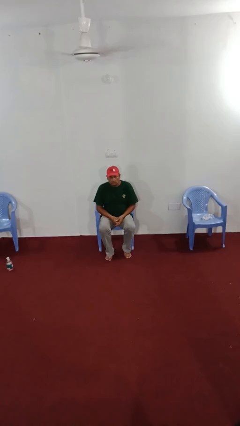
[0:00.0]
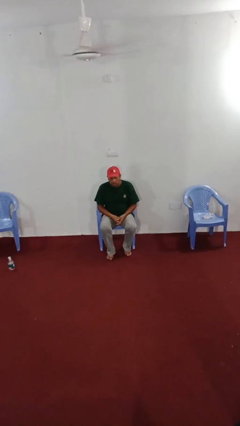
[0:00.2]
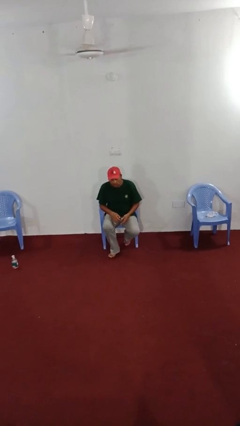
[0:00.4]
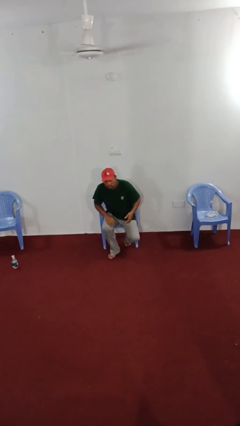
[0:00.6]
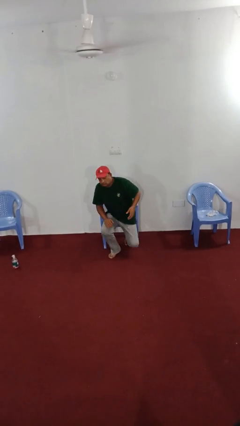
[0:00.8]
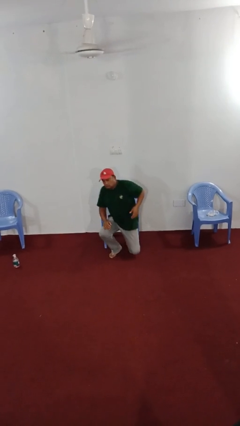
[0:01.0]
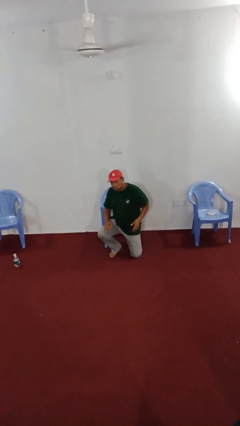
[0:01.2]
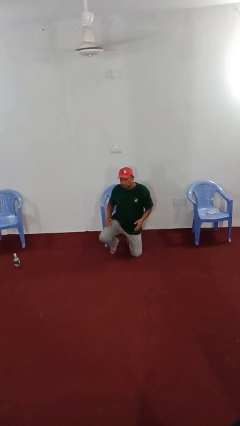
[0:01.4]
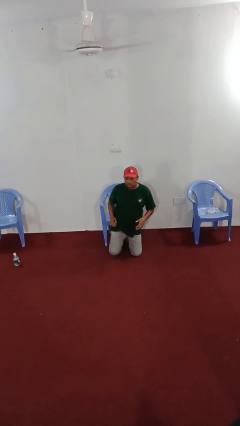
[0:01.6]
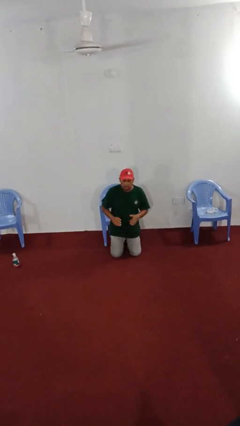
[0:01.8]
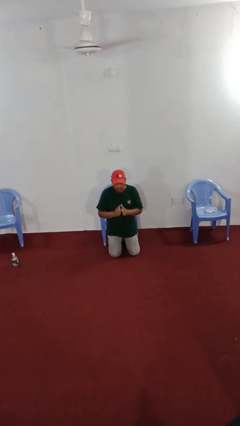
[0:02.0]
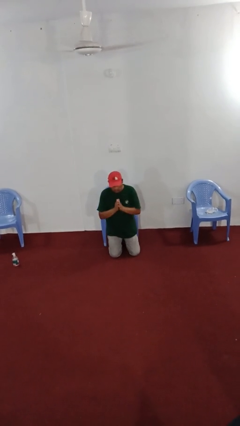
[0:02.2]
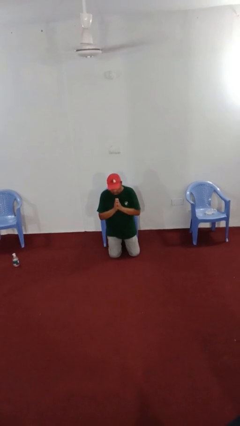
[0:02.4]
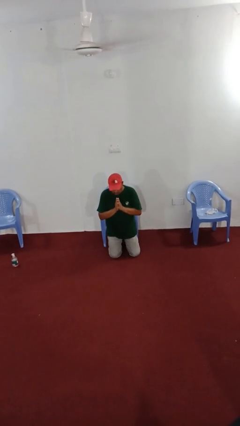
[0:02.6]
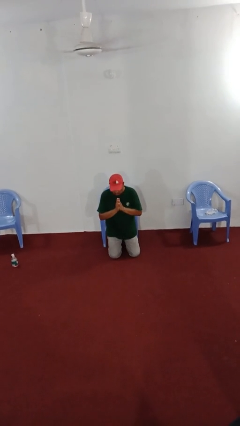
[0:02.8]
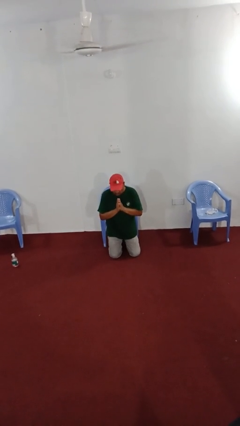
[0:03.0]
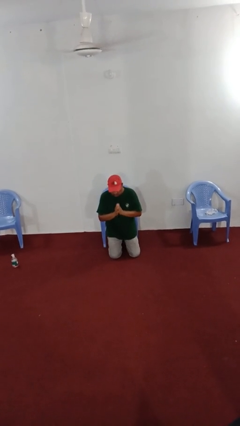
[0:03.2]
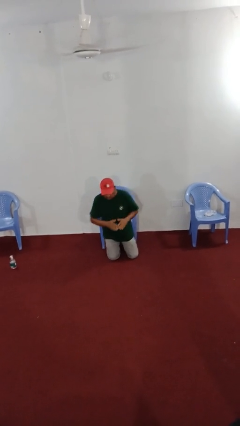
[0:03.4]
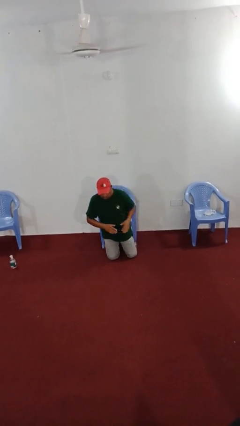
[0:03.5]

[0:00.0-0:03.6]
person prays

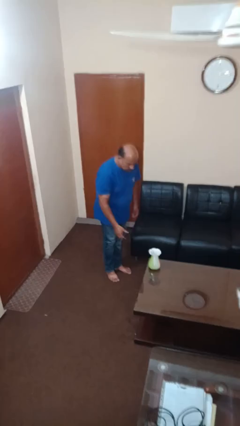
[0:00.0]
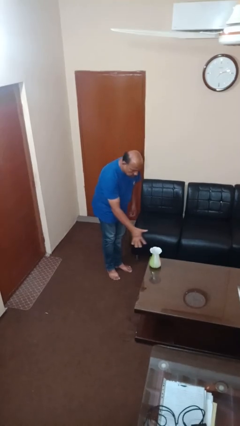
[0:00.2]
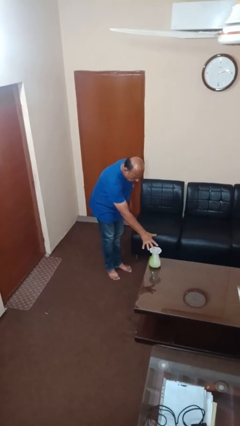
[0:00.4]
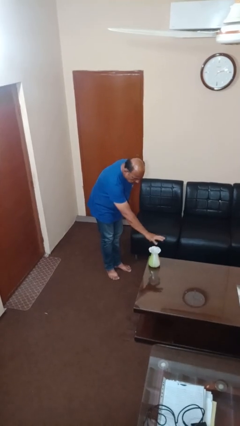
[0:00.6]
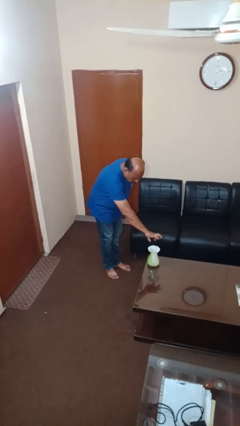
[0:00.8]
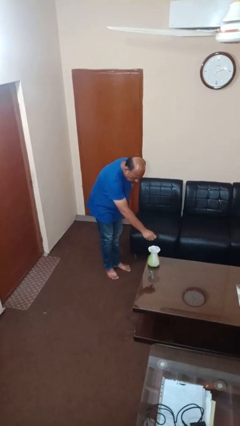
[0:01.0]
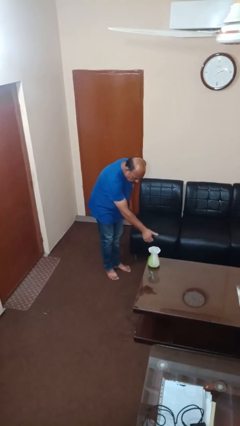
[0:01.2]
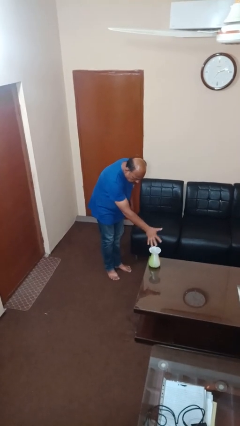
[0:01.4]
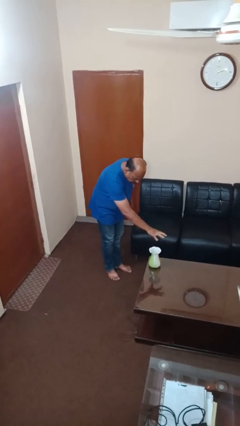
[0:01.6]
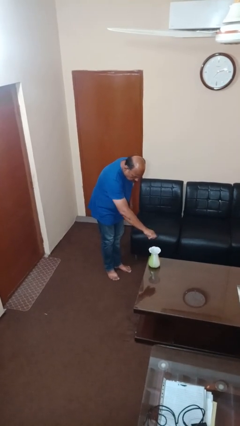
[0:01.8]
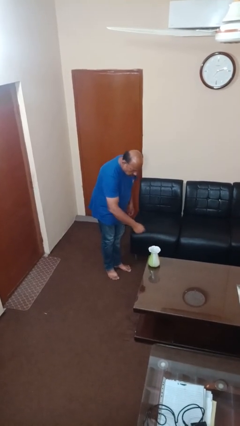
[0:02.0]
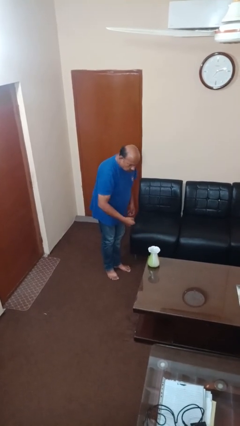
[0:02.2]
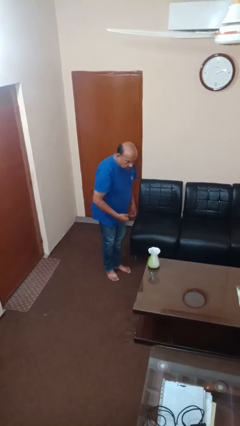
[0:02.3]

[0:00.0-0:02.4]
person waves hand over object

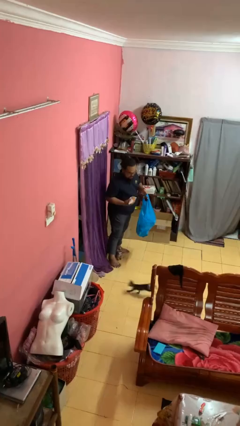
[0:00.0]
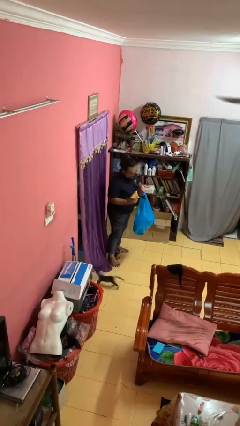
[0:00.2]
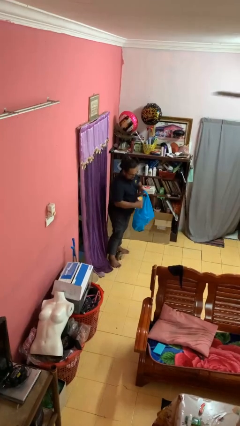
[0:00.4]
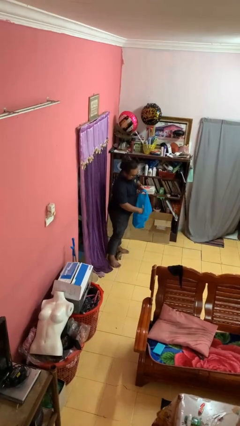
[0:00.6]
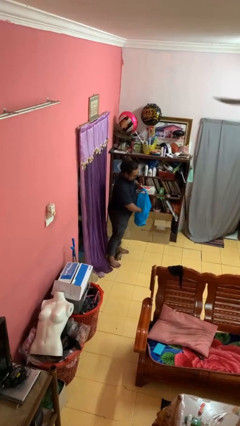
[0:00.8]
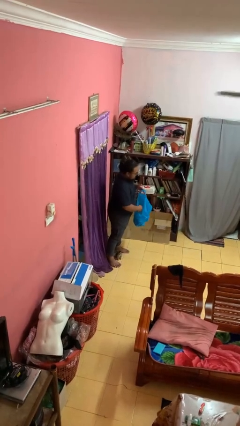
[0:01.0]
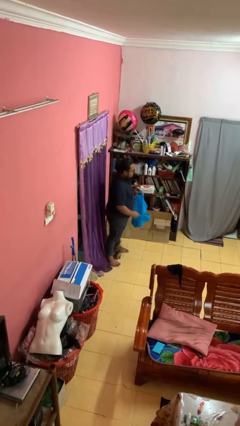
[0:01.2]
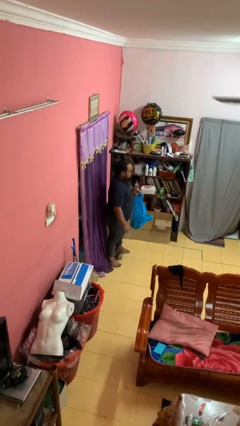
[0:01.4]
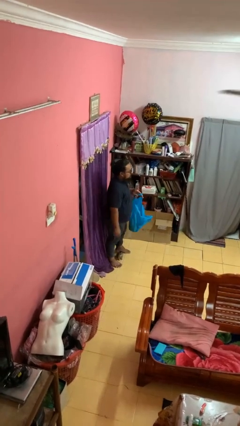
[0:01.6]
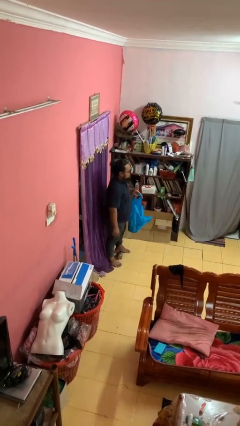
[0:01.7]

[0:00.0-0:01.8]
person puts object into bag

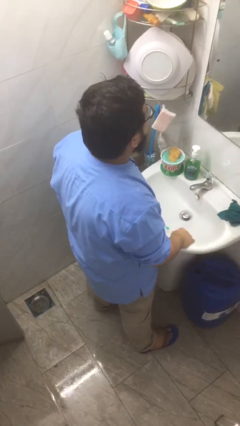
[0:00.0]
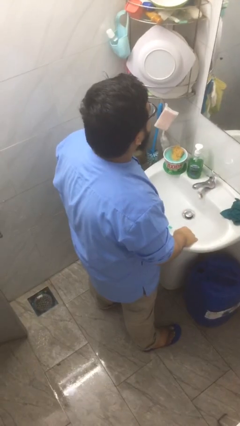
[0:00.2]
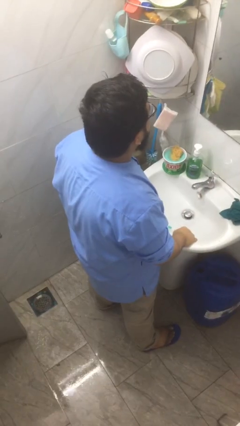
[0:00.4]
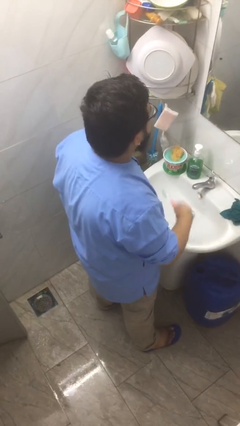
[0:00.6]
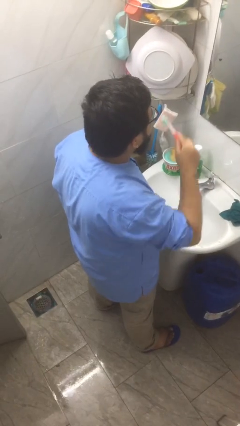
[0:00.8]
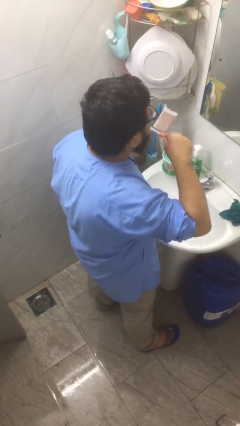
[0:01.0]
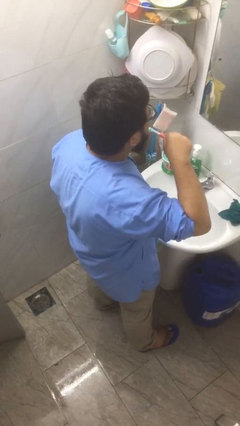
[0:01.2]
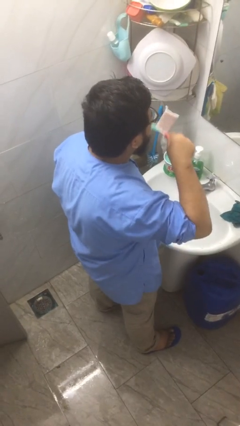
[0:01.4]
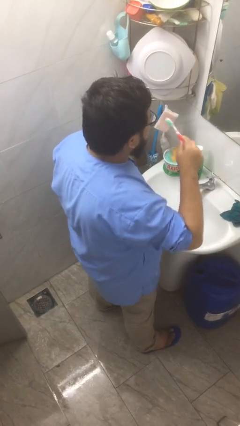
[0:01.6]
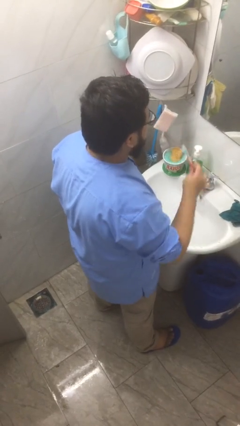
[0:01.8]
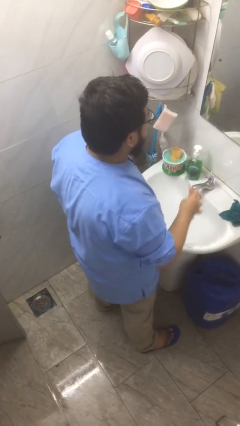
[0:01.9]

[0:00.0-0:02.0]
person brushes teeth

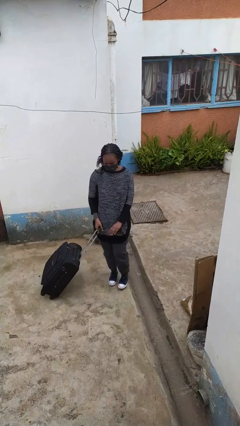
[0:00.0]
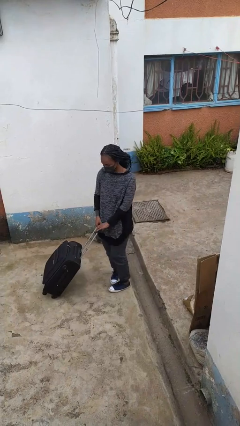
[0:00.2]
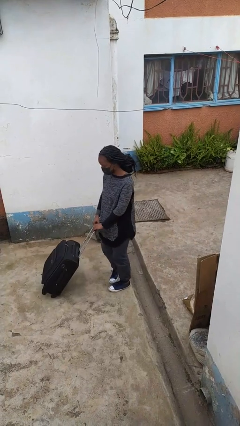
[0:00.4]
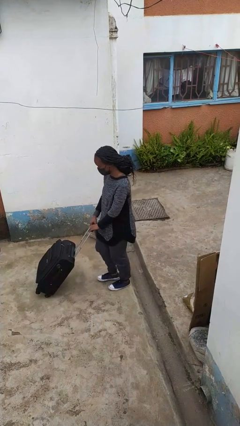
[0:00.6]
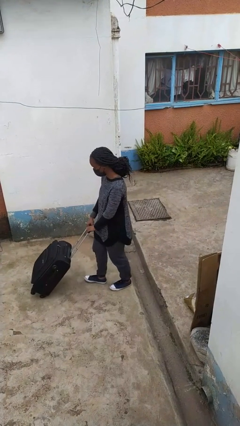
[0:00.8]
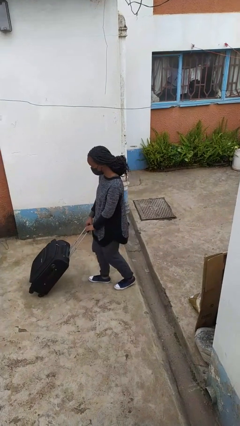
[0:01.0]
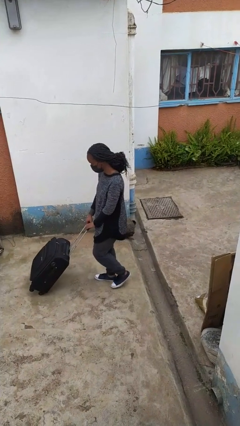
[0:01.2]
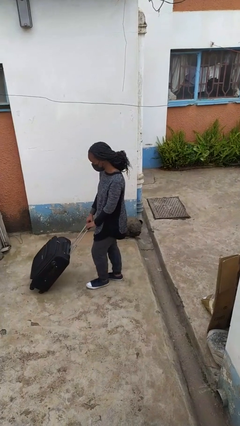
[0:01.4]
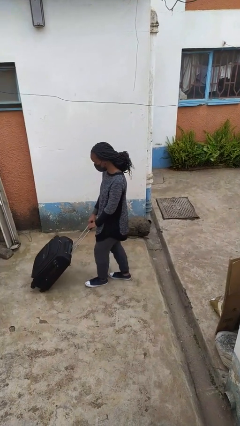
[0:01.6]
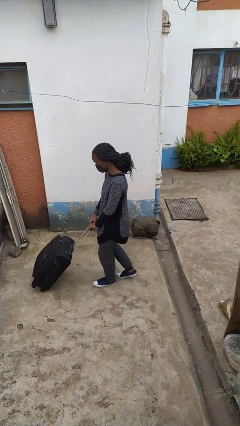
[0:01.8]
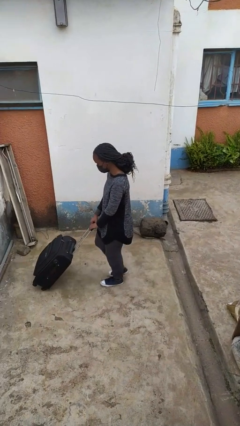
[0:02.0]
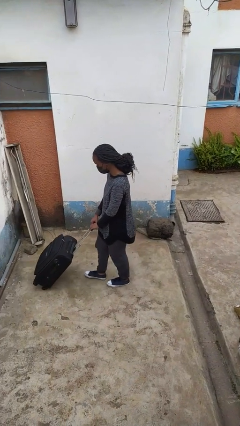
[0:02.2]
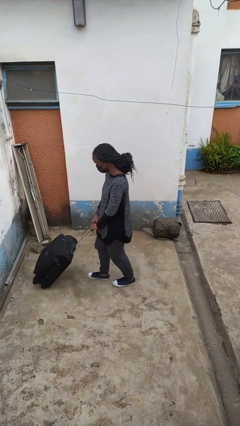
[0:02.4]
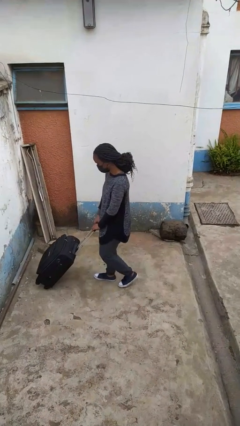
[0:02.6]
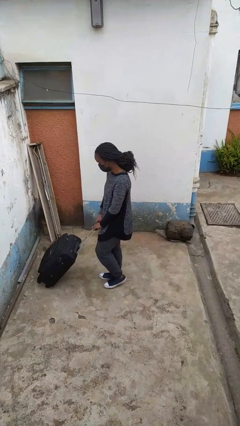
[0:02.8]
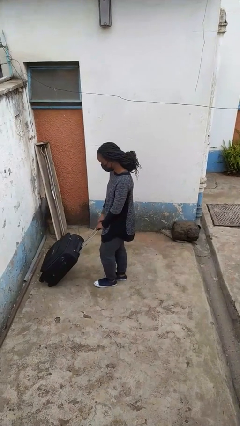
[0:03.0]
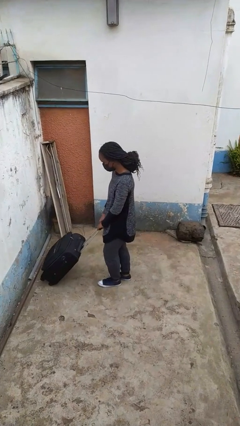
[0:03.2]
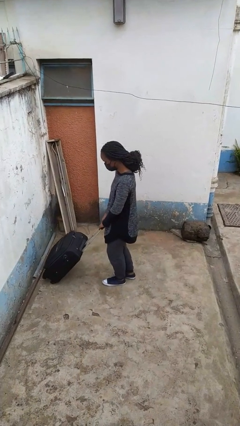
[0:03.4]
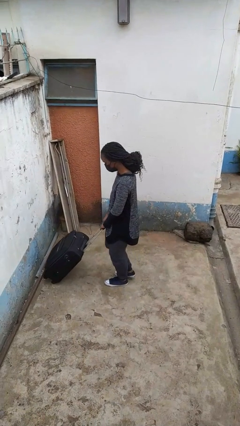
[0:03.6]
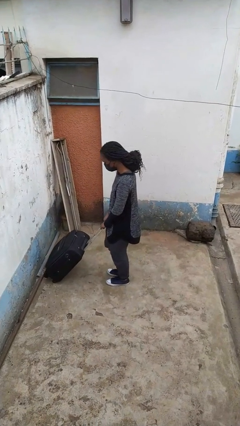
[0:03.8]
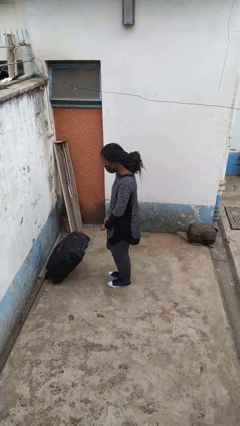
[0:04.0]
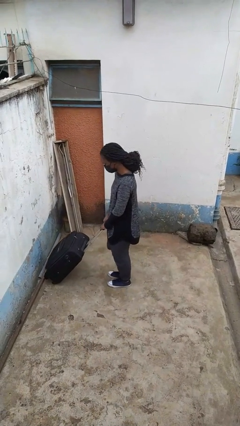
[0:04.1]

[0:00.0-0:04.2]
person pushes wheeled cart

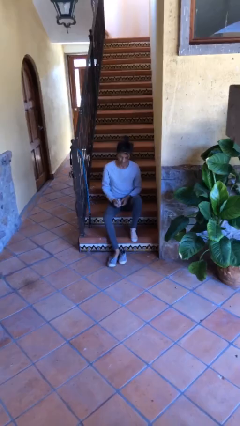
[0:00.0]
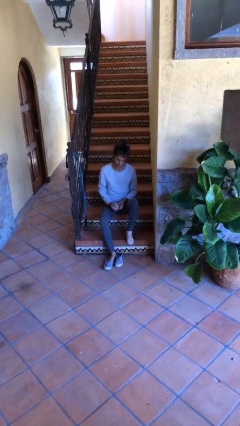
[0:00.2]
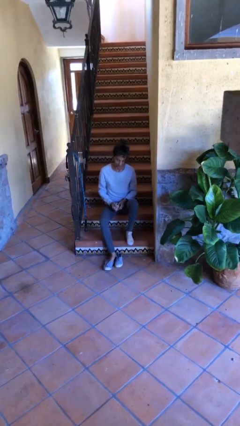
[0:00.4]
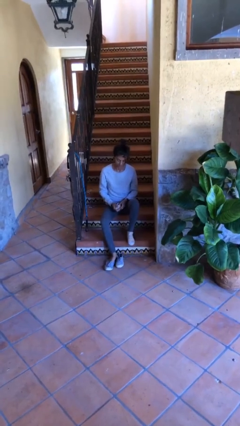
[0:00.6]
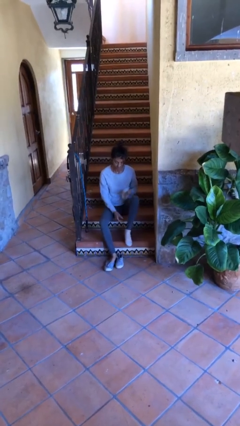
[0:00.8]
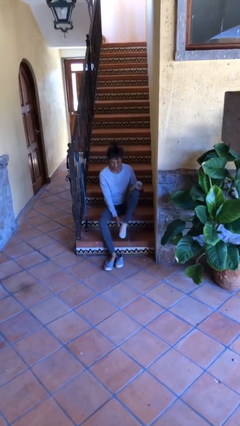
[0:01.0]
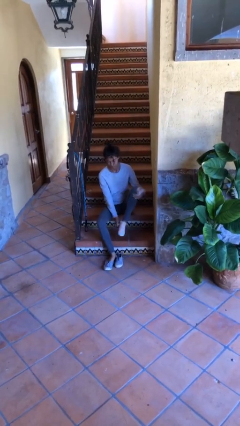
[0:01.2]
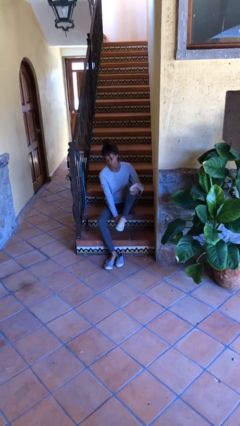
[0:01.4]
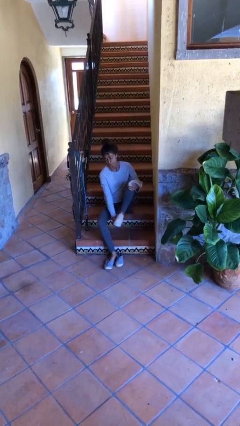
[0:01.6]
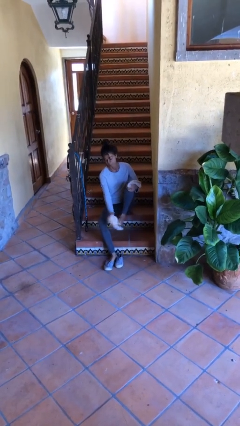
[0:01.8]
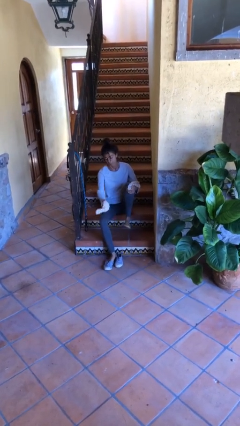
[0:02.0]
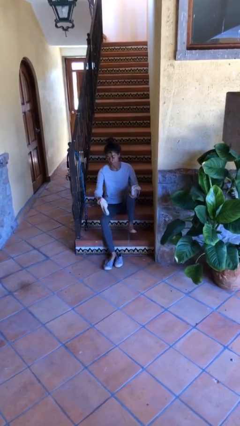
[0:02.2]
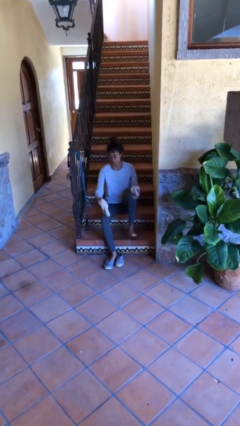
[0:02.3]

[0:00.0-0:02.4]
person takes off socks

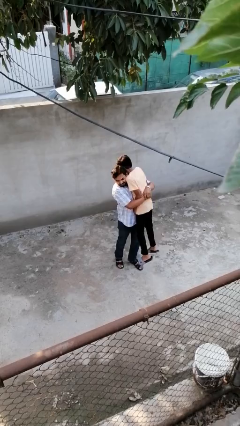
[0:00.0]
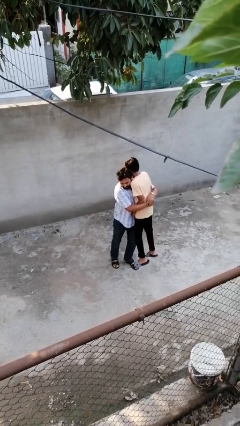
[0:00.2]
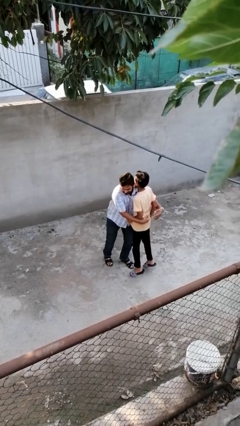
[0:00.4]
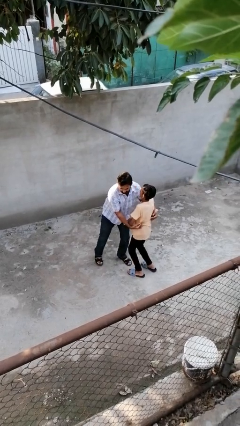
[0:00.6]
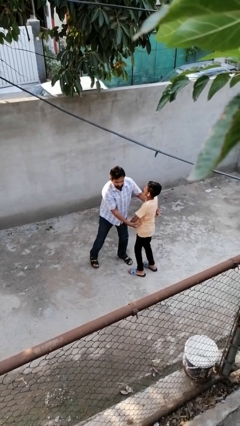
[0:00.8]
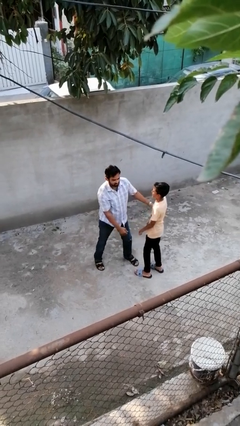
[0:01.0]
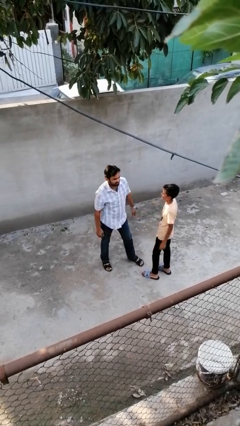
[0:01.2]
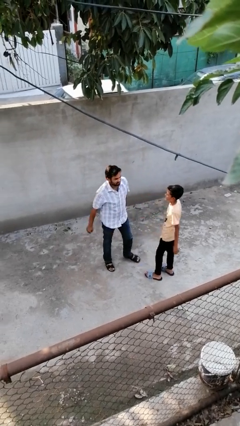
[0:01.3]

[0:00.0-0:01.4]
person puts down person
